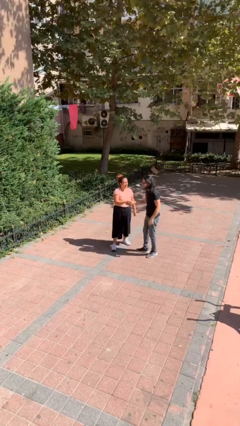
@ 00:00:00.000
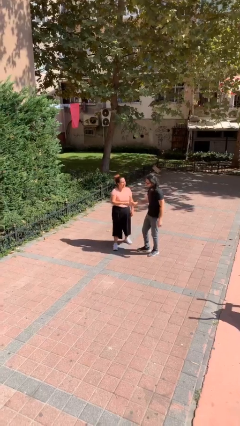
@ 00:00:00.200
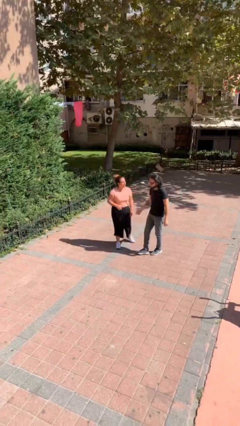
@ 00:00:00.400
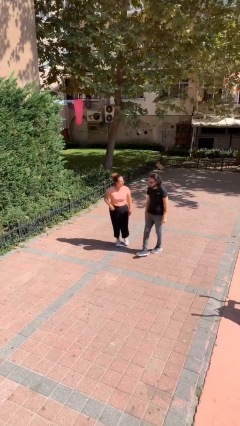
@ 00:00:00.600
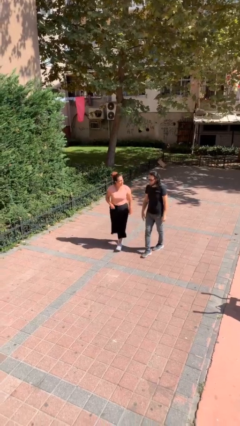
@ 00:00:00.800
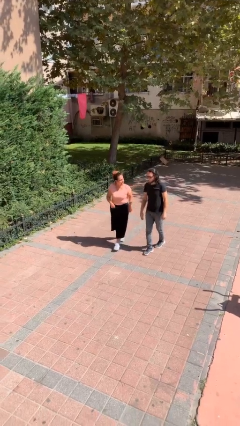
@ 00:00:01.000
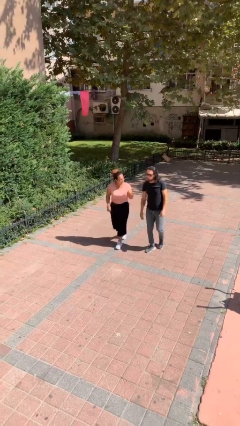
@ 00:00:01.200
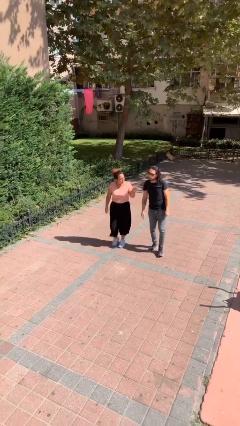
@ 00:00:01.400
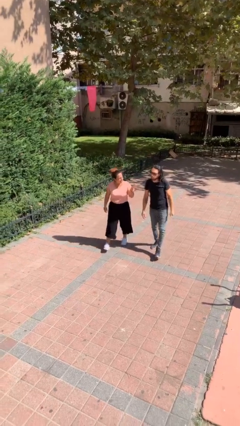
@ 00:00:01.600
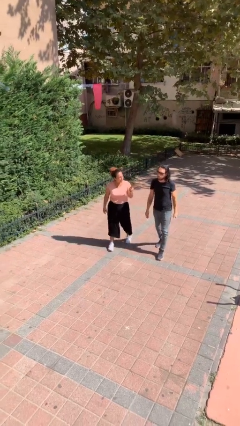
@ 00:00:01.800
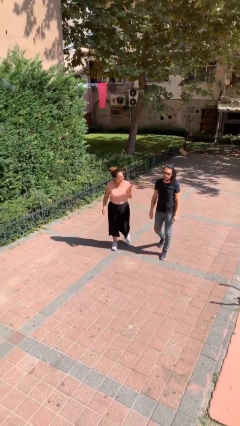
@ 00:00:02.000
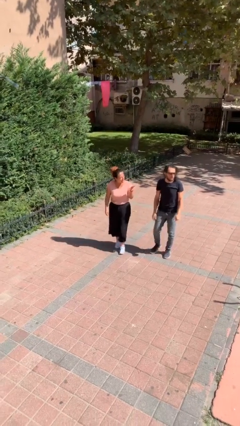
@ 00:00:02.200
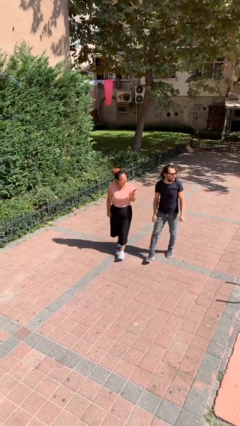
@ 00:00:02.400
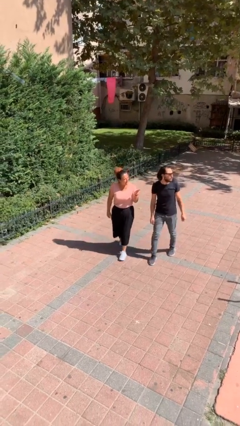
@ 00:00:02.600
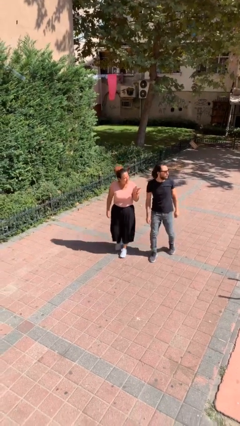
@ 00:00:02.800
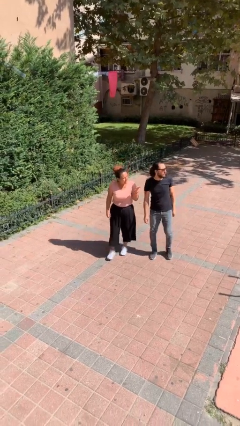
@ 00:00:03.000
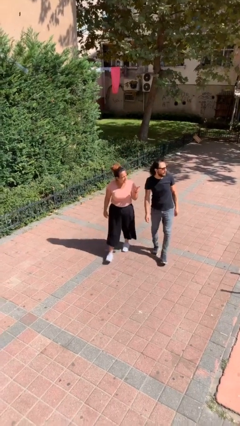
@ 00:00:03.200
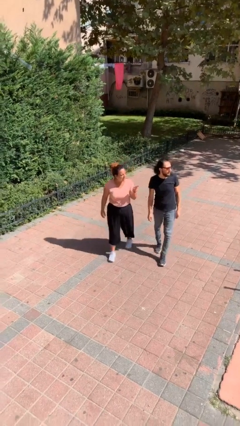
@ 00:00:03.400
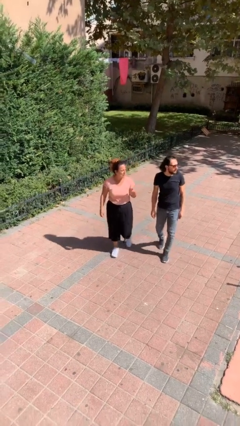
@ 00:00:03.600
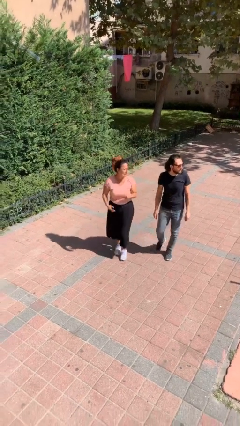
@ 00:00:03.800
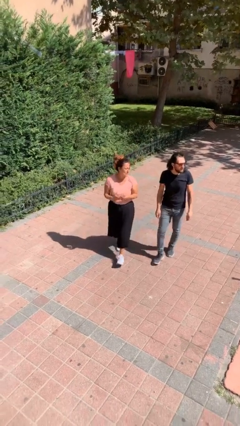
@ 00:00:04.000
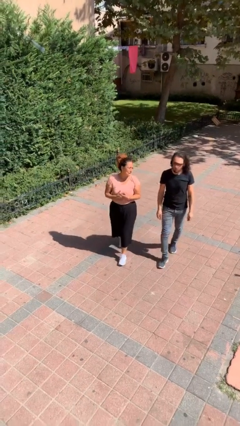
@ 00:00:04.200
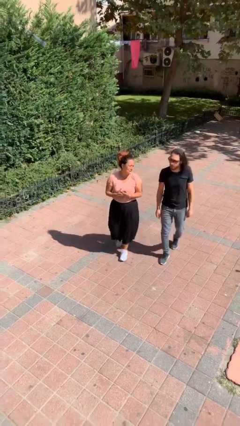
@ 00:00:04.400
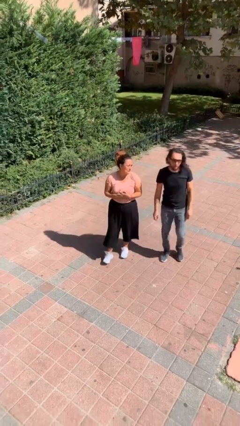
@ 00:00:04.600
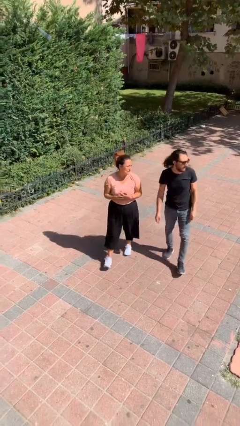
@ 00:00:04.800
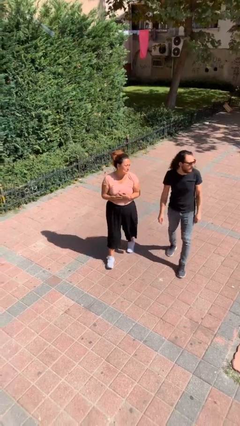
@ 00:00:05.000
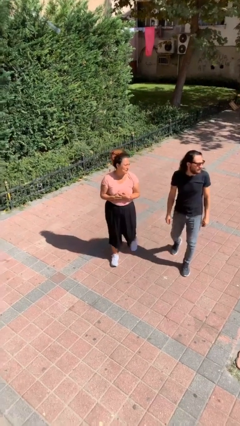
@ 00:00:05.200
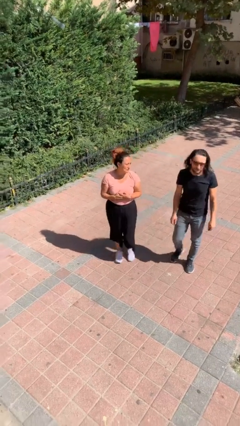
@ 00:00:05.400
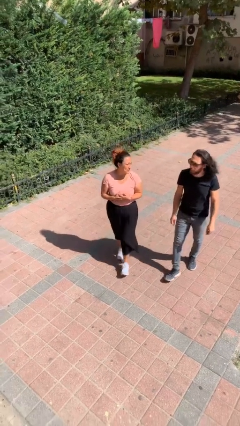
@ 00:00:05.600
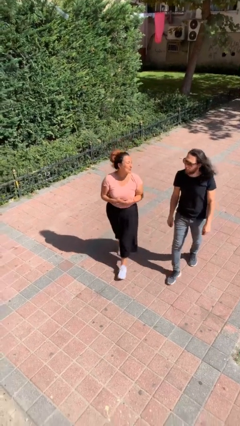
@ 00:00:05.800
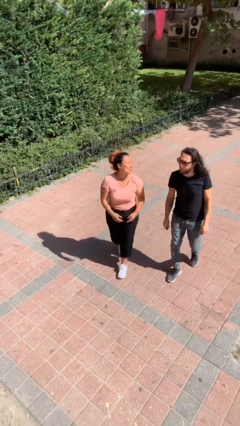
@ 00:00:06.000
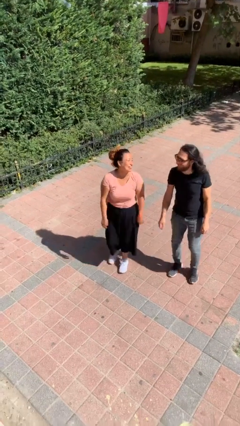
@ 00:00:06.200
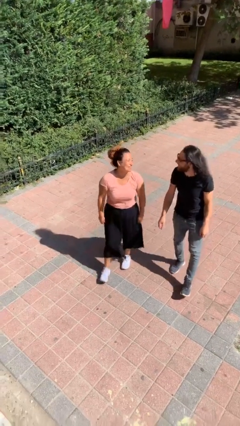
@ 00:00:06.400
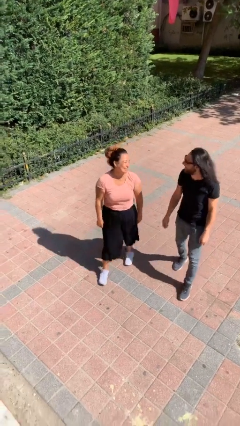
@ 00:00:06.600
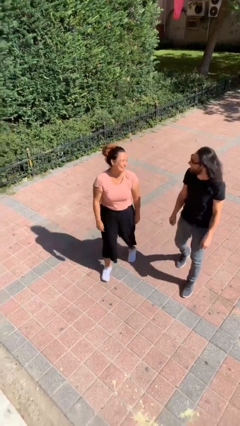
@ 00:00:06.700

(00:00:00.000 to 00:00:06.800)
person talks to person

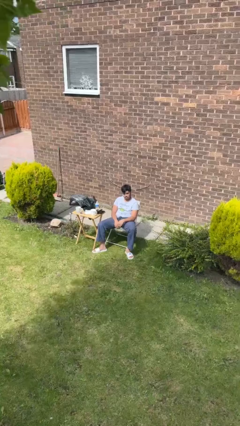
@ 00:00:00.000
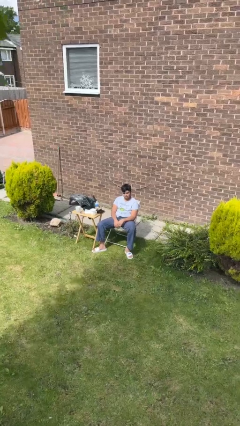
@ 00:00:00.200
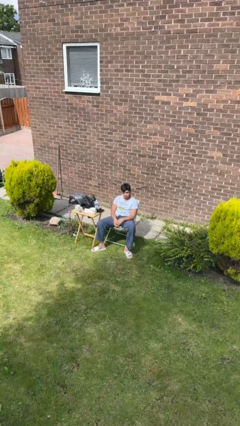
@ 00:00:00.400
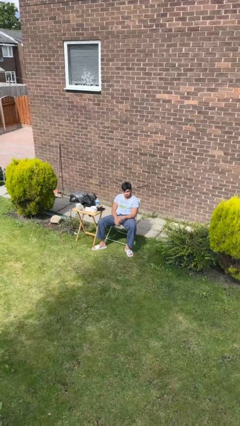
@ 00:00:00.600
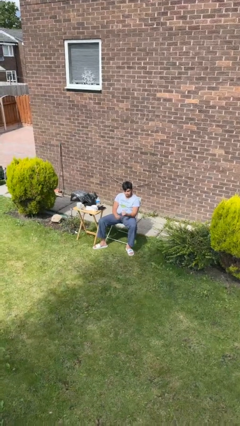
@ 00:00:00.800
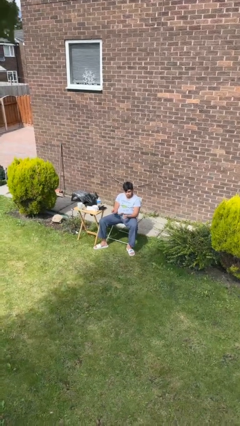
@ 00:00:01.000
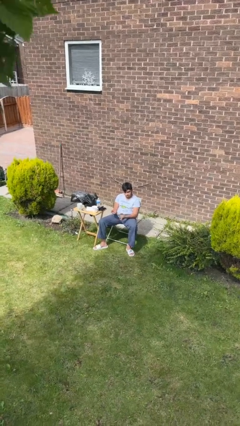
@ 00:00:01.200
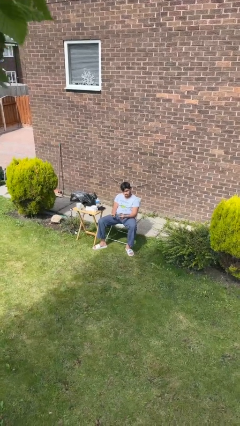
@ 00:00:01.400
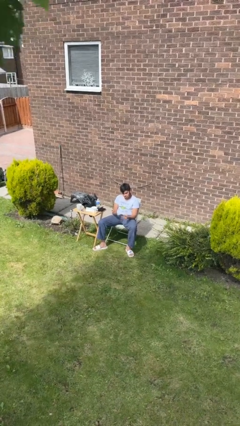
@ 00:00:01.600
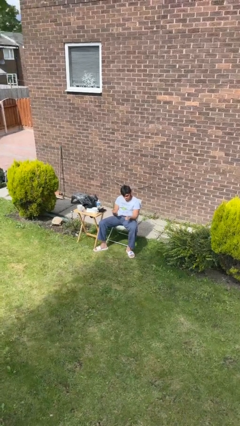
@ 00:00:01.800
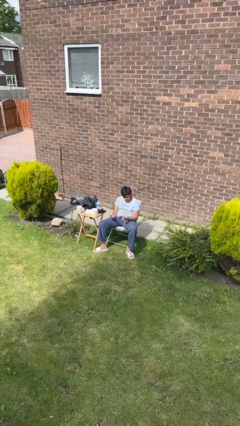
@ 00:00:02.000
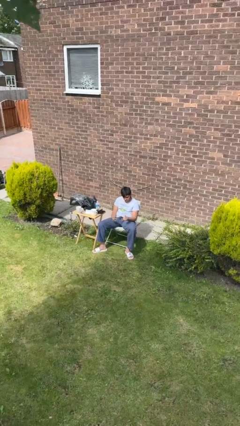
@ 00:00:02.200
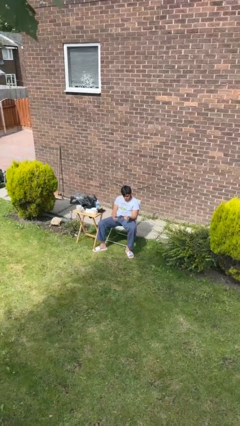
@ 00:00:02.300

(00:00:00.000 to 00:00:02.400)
person snaps fingers

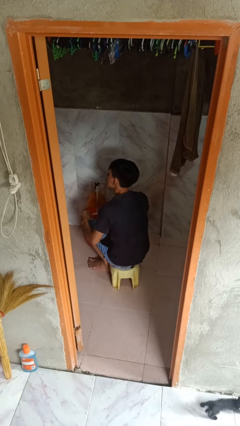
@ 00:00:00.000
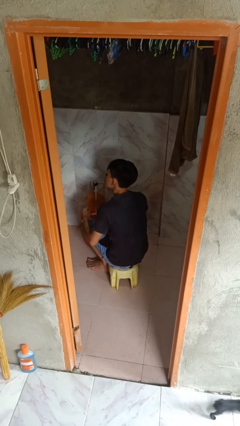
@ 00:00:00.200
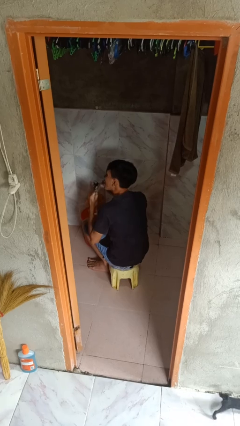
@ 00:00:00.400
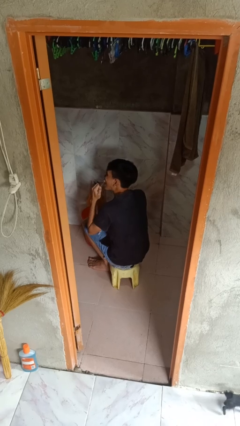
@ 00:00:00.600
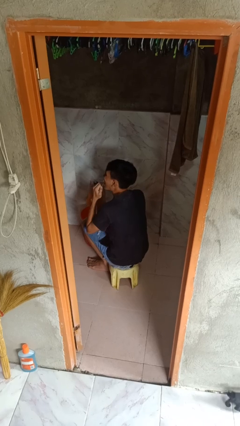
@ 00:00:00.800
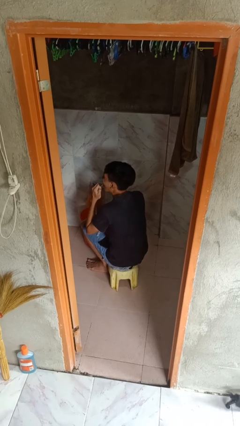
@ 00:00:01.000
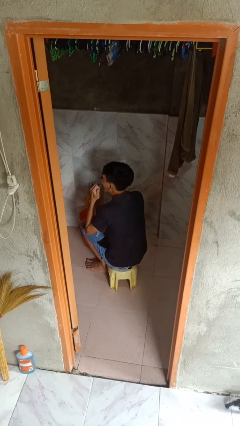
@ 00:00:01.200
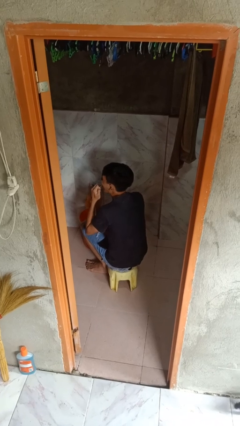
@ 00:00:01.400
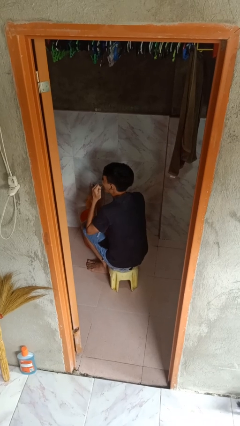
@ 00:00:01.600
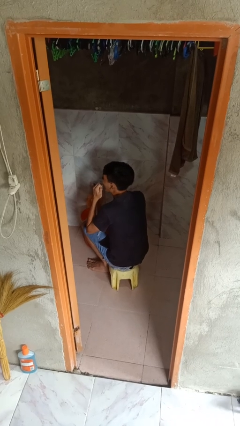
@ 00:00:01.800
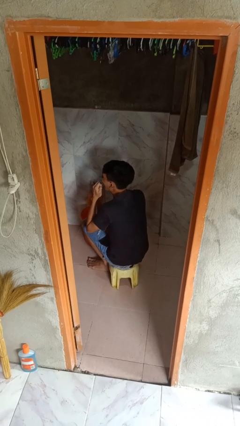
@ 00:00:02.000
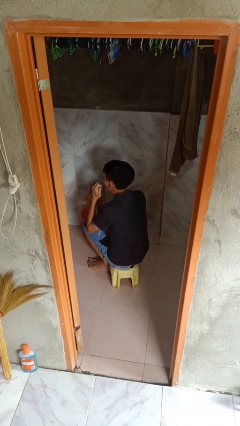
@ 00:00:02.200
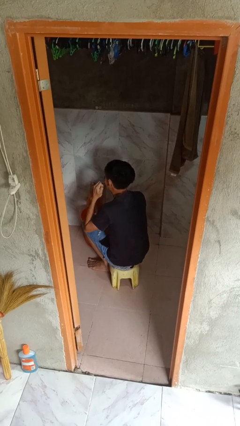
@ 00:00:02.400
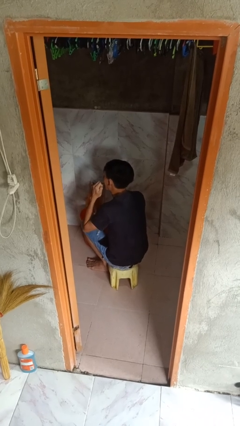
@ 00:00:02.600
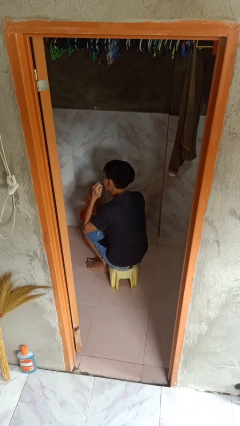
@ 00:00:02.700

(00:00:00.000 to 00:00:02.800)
person flosses

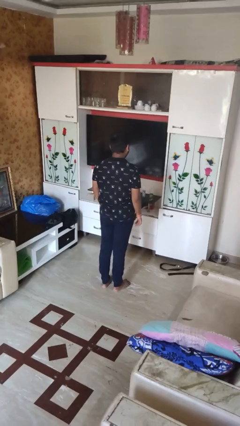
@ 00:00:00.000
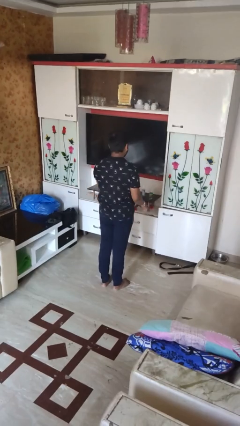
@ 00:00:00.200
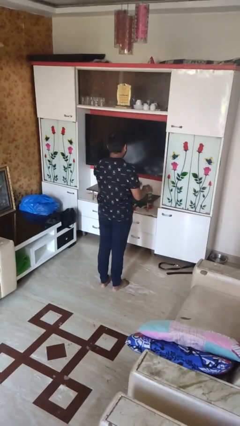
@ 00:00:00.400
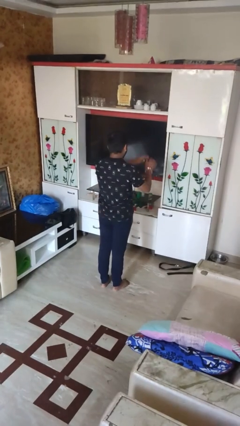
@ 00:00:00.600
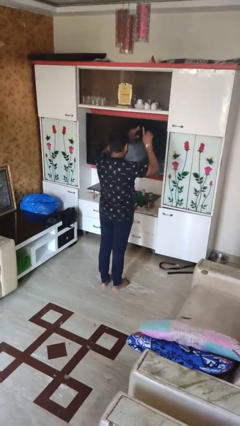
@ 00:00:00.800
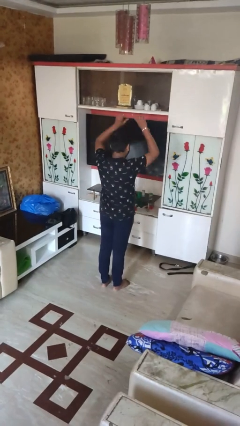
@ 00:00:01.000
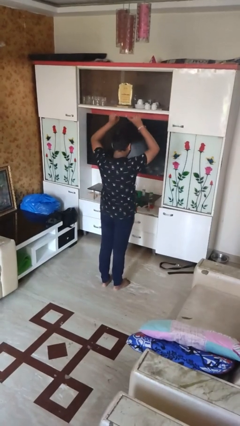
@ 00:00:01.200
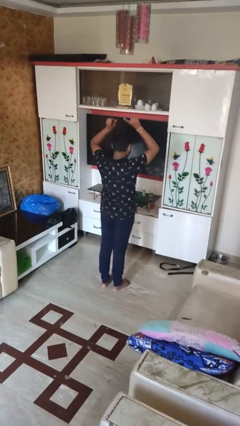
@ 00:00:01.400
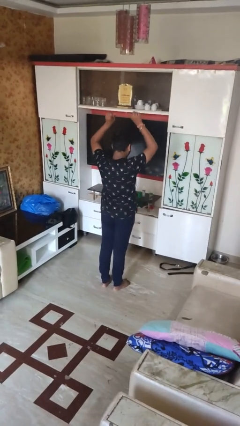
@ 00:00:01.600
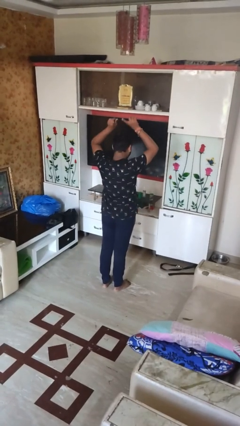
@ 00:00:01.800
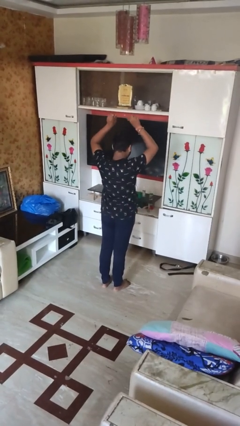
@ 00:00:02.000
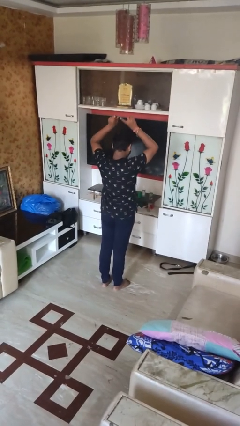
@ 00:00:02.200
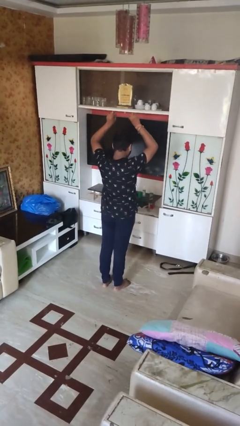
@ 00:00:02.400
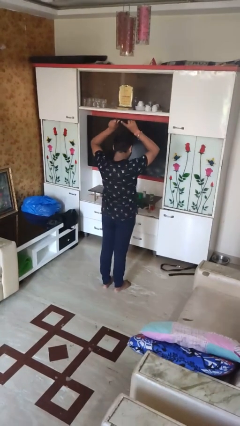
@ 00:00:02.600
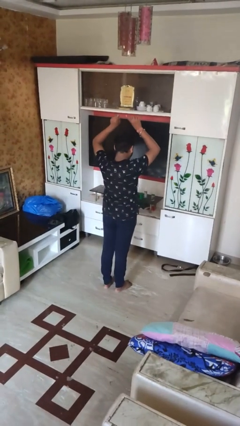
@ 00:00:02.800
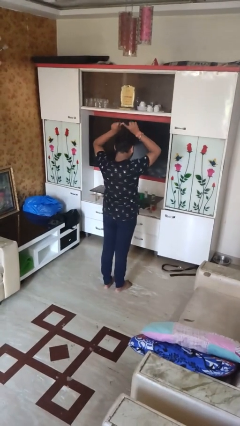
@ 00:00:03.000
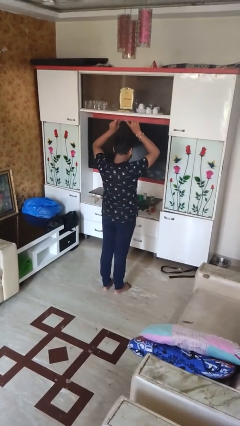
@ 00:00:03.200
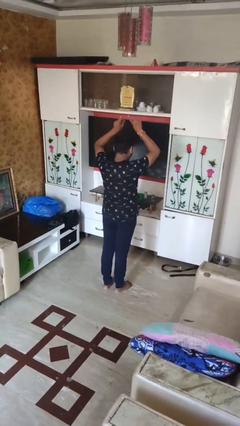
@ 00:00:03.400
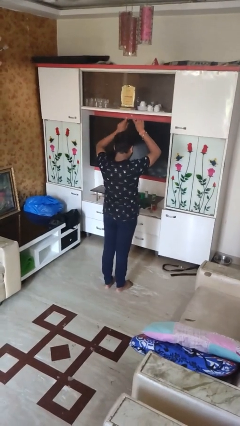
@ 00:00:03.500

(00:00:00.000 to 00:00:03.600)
person dances in place

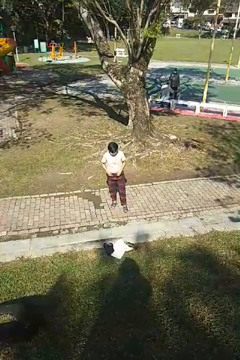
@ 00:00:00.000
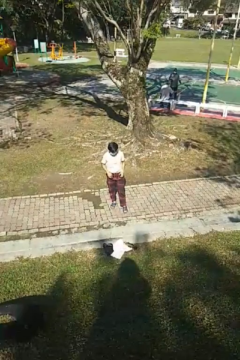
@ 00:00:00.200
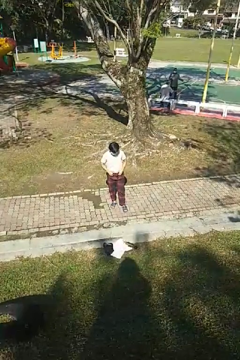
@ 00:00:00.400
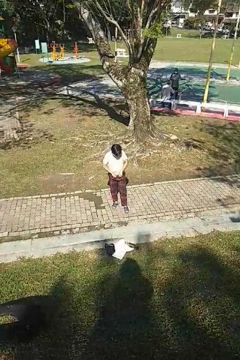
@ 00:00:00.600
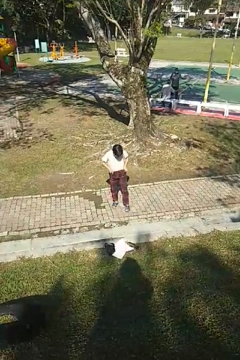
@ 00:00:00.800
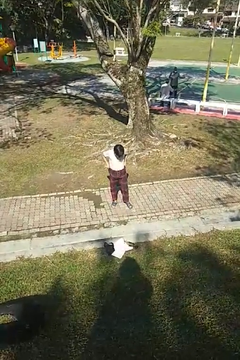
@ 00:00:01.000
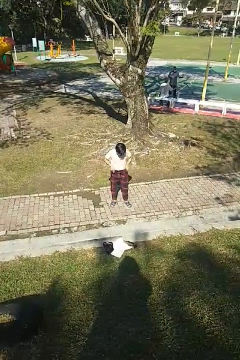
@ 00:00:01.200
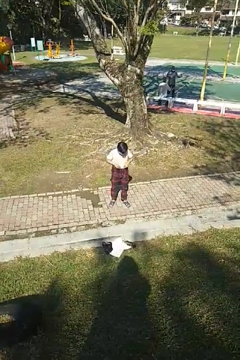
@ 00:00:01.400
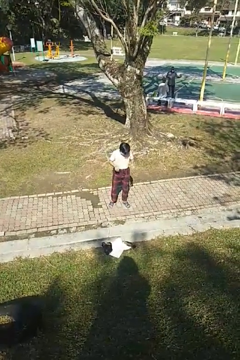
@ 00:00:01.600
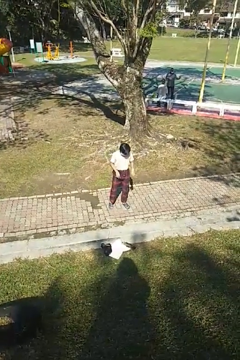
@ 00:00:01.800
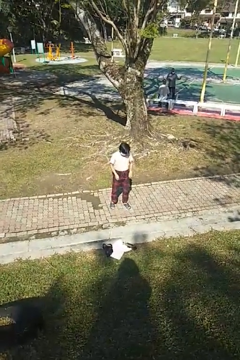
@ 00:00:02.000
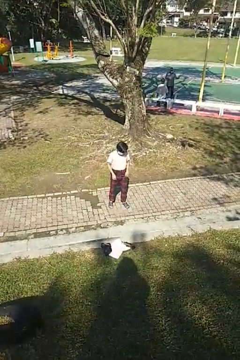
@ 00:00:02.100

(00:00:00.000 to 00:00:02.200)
person hikes up pants
